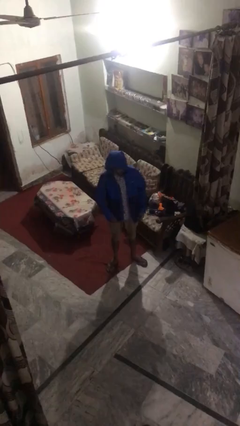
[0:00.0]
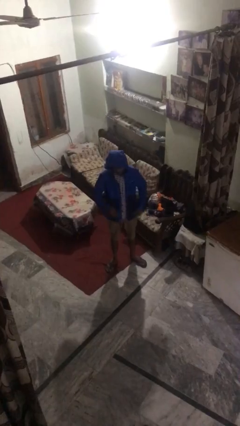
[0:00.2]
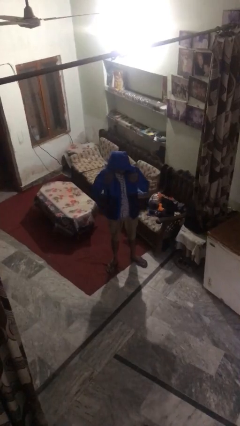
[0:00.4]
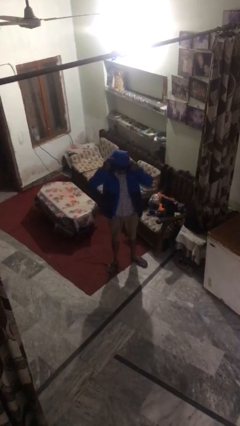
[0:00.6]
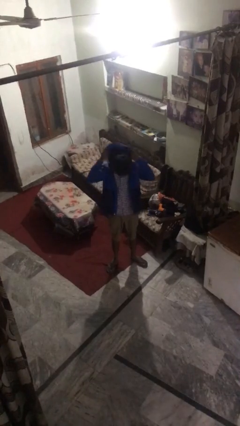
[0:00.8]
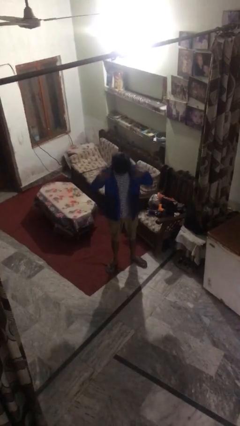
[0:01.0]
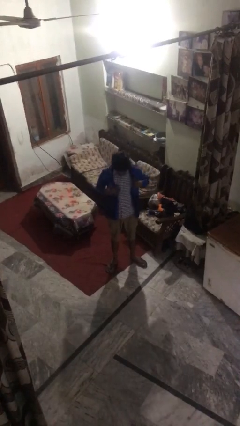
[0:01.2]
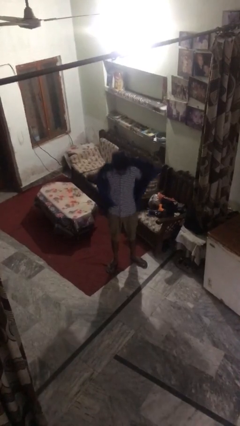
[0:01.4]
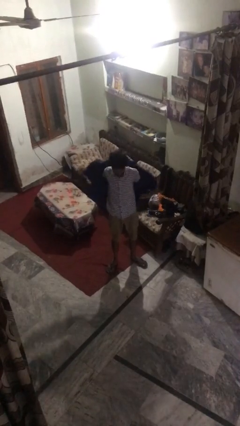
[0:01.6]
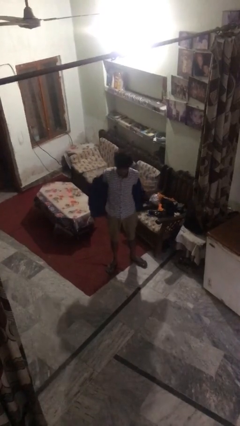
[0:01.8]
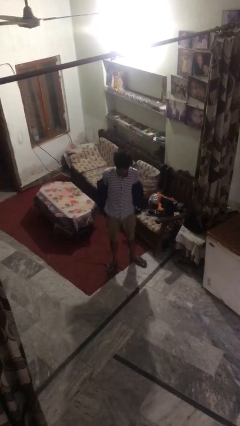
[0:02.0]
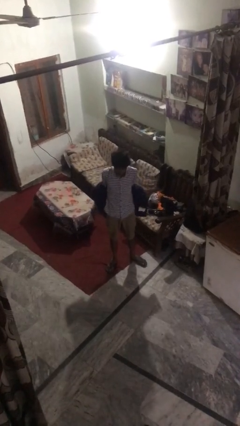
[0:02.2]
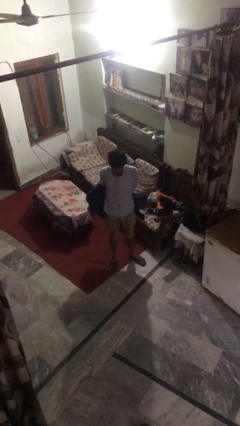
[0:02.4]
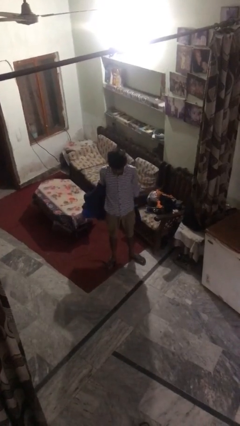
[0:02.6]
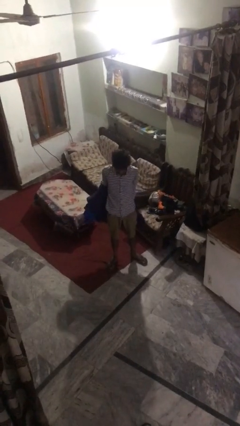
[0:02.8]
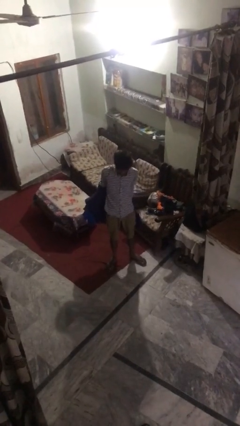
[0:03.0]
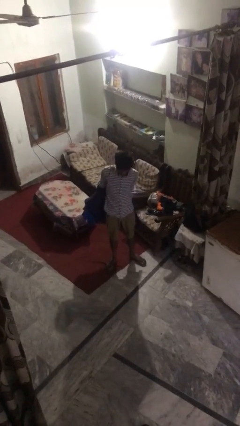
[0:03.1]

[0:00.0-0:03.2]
person takes off hoodie

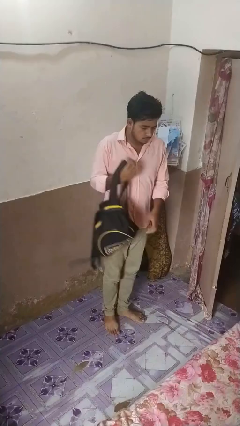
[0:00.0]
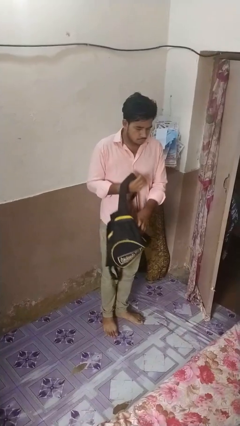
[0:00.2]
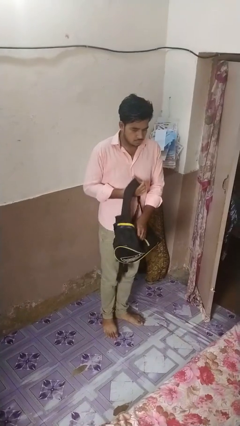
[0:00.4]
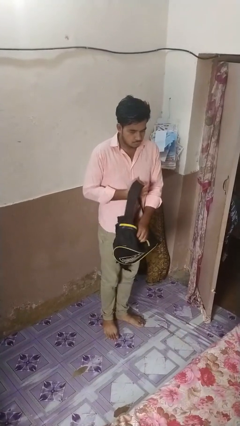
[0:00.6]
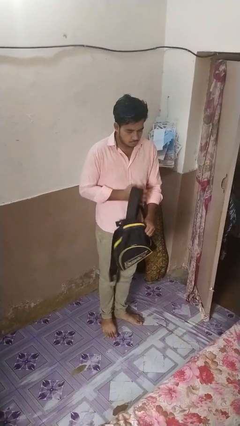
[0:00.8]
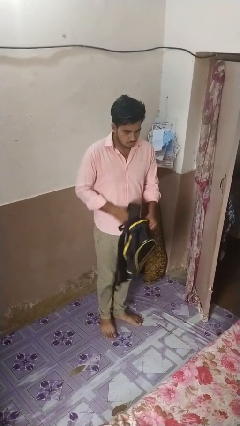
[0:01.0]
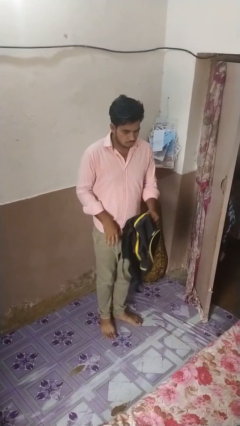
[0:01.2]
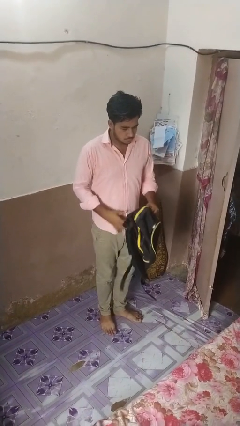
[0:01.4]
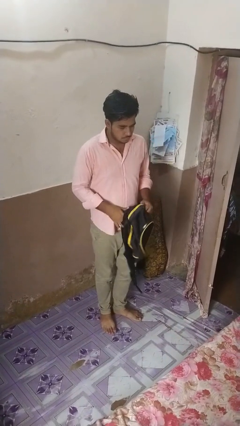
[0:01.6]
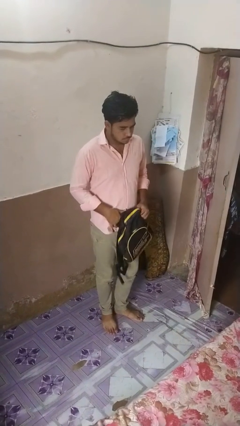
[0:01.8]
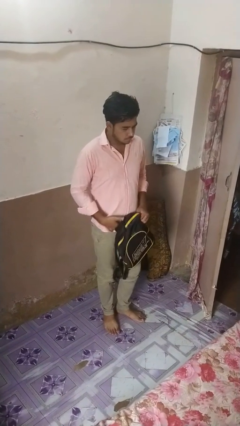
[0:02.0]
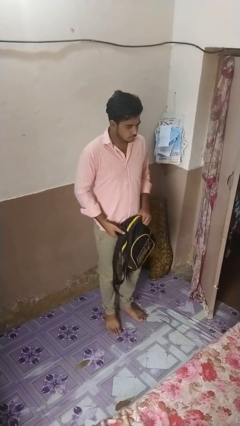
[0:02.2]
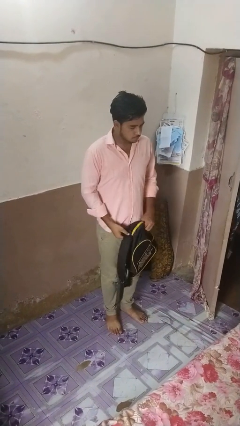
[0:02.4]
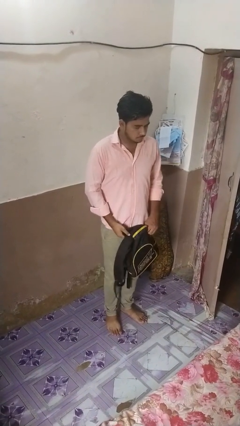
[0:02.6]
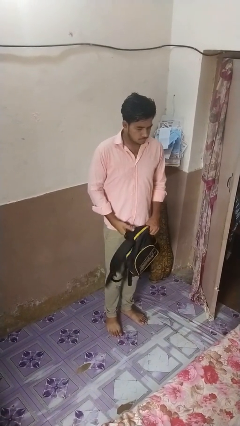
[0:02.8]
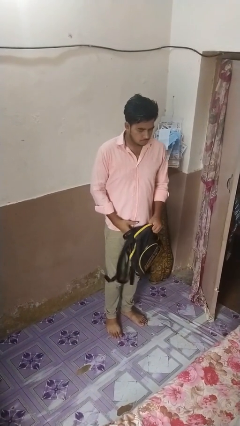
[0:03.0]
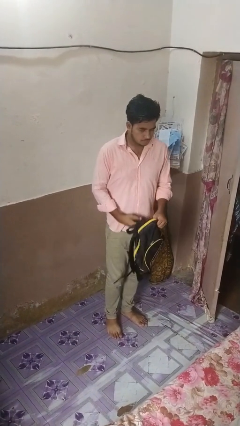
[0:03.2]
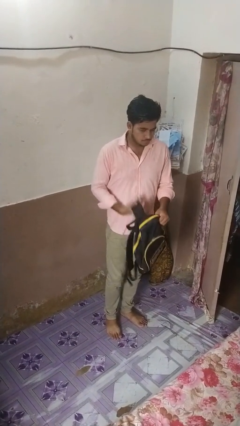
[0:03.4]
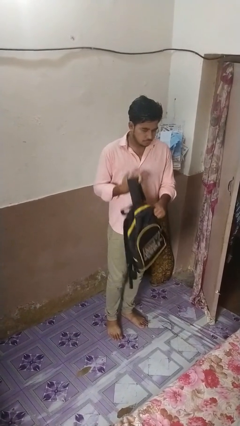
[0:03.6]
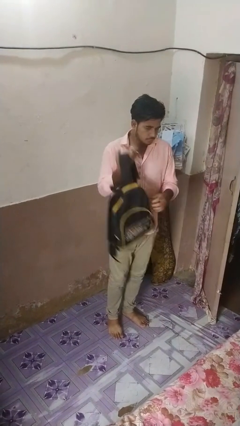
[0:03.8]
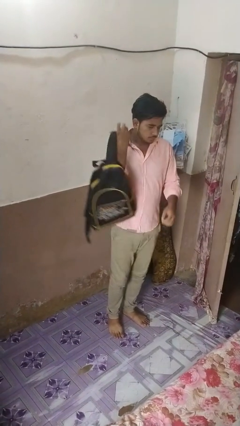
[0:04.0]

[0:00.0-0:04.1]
person takes off backpack

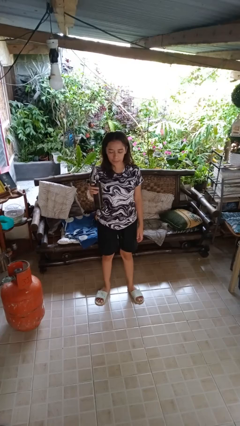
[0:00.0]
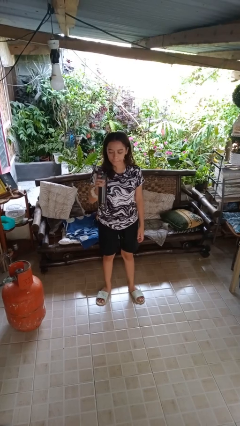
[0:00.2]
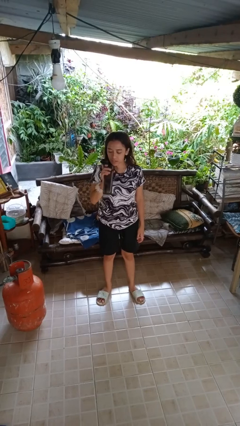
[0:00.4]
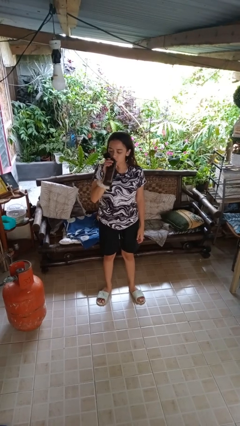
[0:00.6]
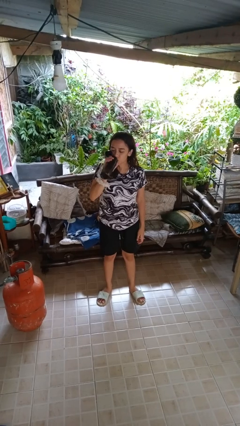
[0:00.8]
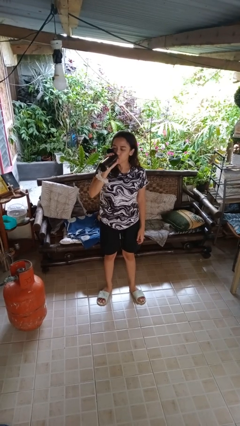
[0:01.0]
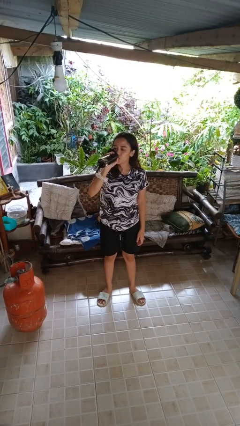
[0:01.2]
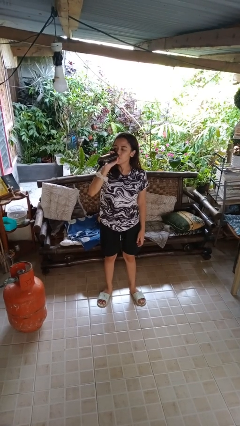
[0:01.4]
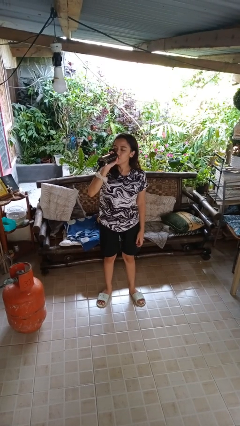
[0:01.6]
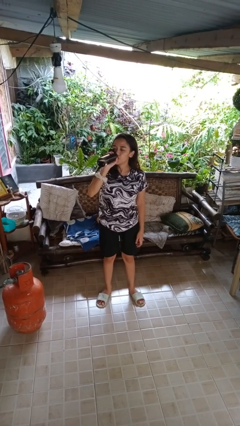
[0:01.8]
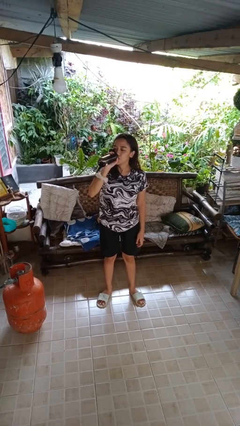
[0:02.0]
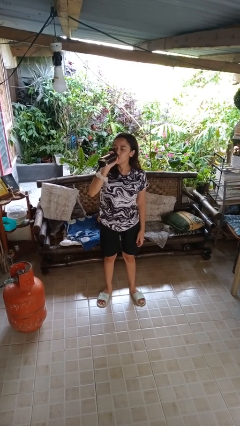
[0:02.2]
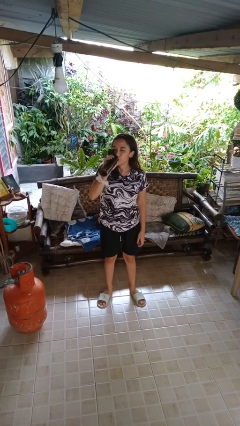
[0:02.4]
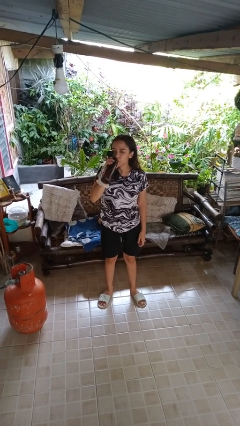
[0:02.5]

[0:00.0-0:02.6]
person drinks from bottle

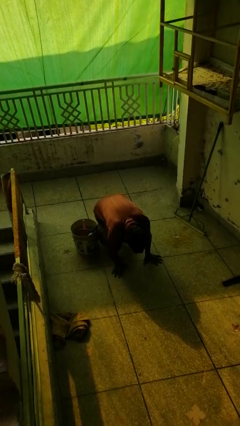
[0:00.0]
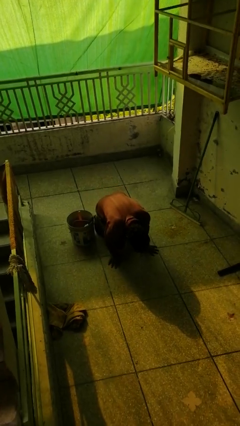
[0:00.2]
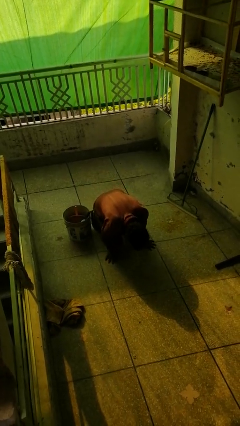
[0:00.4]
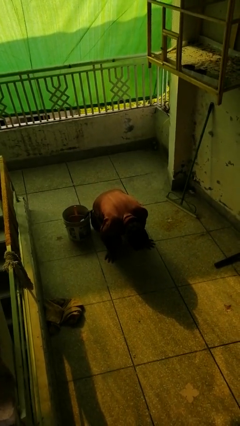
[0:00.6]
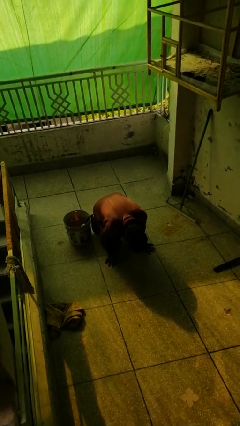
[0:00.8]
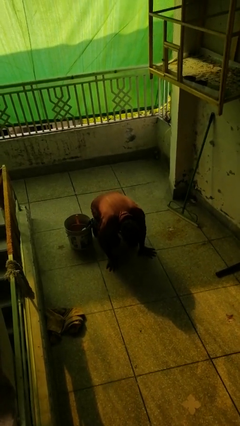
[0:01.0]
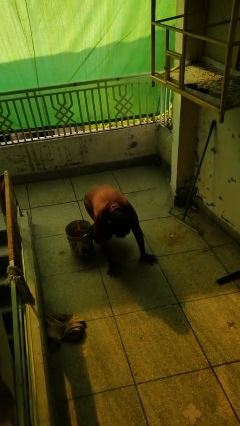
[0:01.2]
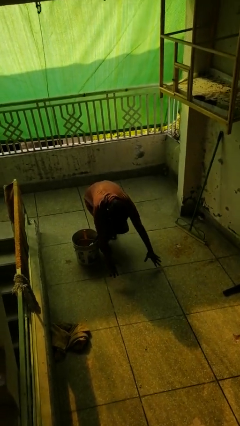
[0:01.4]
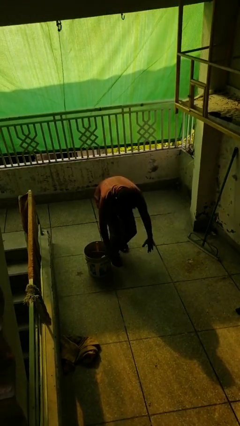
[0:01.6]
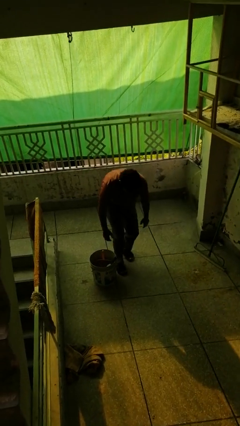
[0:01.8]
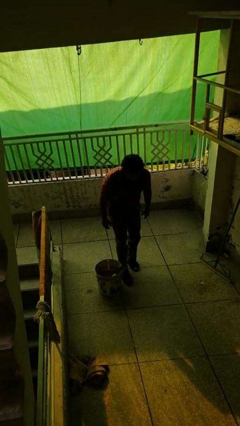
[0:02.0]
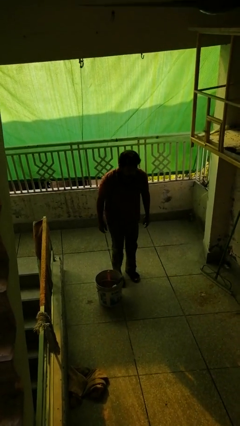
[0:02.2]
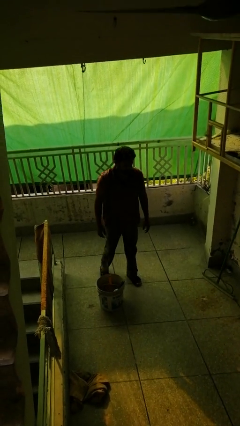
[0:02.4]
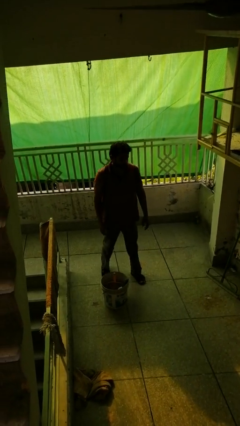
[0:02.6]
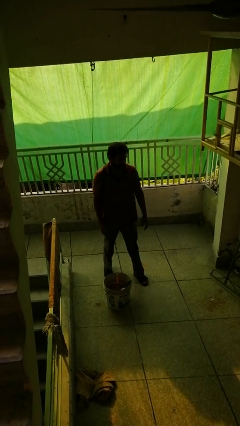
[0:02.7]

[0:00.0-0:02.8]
person stands up from floor

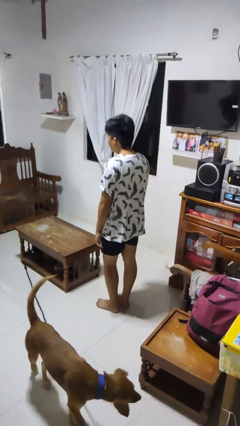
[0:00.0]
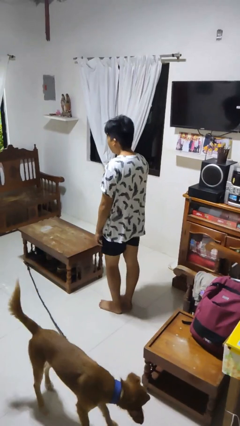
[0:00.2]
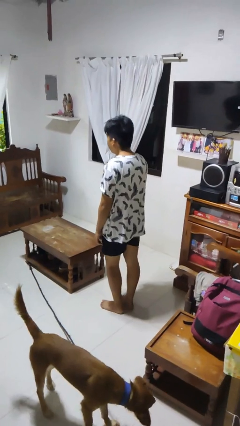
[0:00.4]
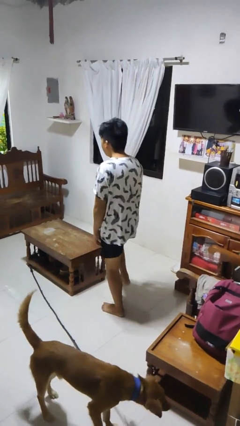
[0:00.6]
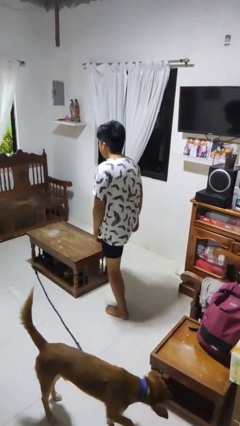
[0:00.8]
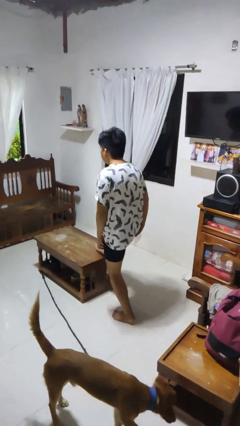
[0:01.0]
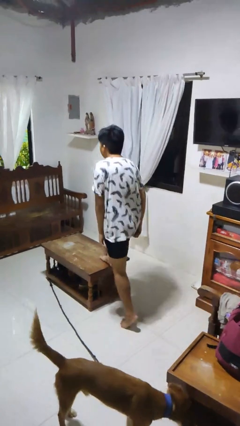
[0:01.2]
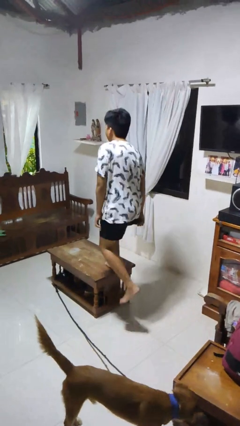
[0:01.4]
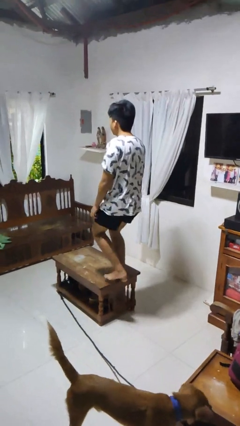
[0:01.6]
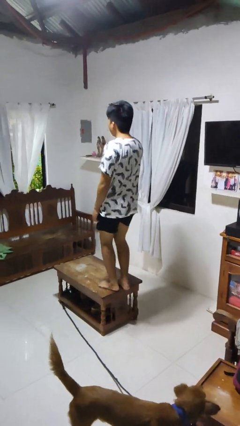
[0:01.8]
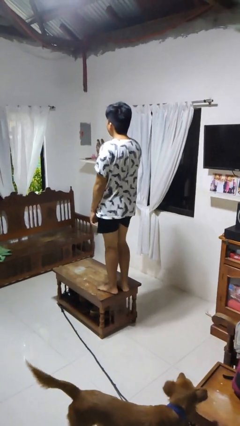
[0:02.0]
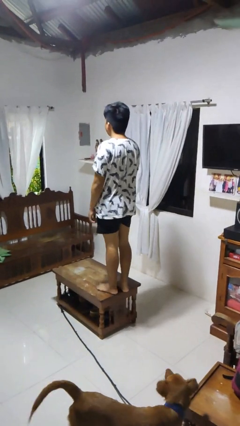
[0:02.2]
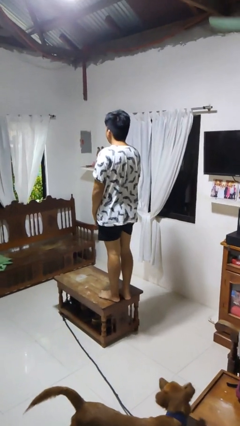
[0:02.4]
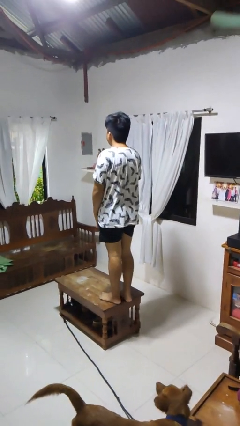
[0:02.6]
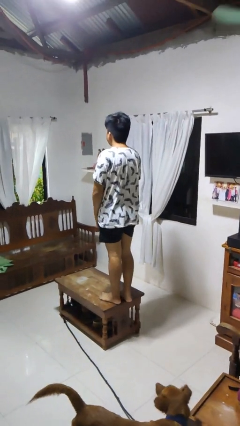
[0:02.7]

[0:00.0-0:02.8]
person climbs on table

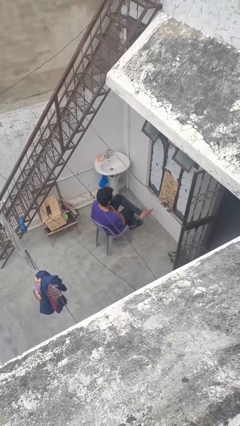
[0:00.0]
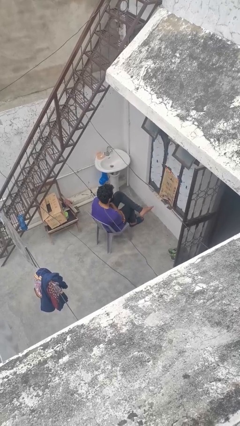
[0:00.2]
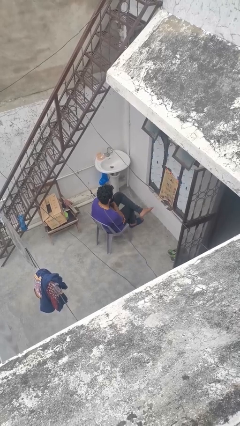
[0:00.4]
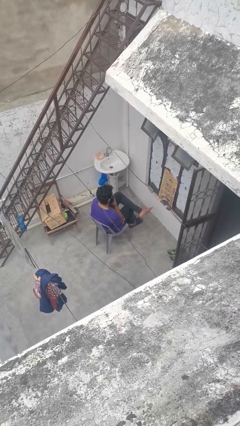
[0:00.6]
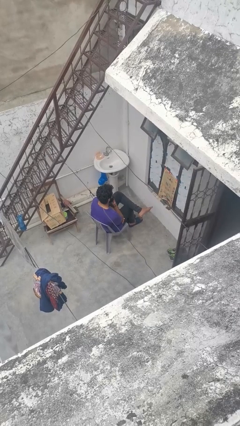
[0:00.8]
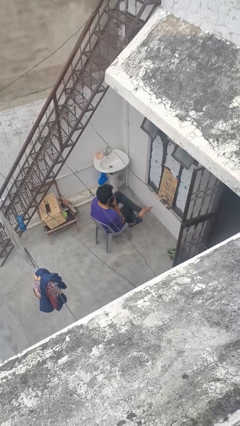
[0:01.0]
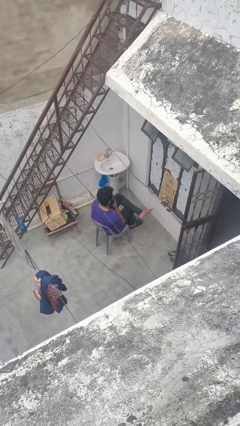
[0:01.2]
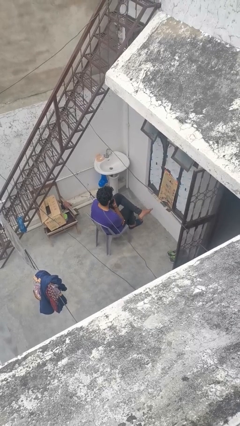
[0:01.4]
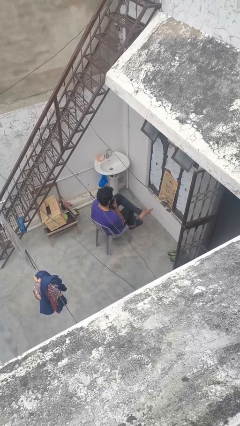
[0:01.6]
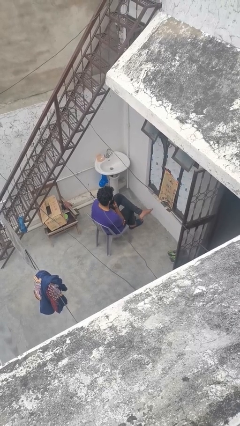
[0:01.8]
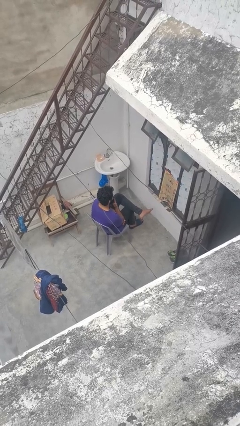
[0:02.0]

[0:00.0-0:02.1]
person strokes chin

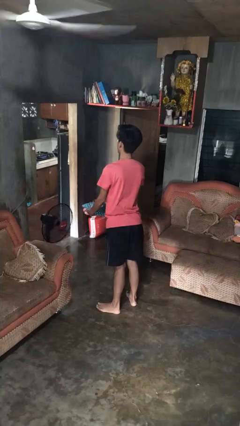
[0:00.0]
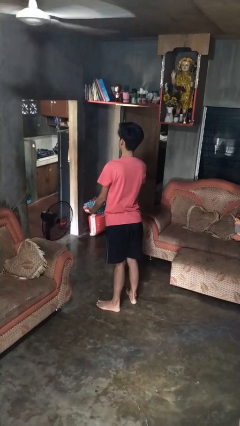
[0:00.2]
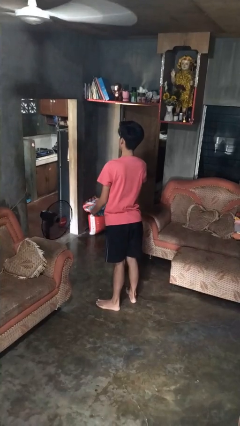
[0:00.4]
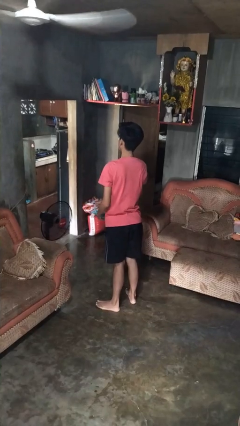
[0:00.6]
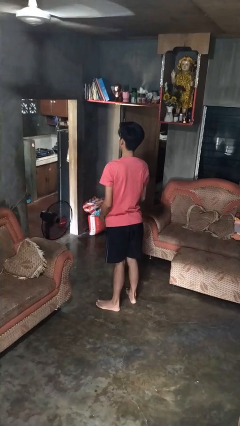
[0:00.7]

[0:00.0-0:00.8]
person catches dropped object
